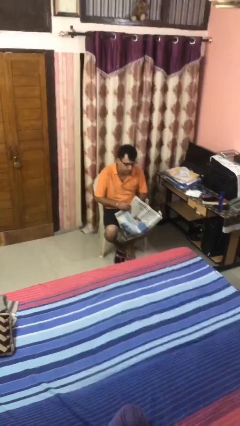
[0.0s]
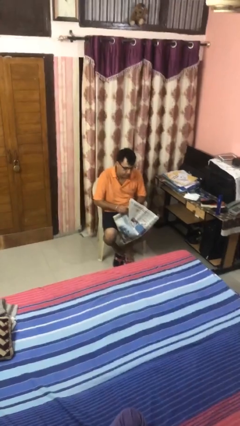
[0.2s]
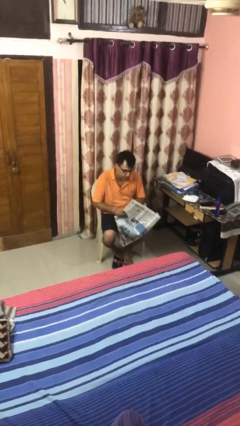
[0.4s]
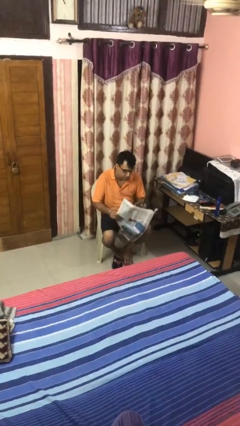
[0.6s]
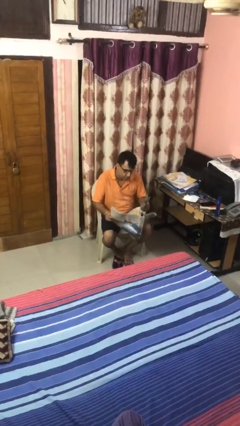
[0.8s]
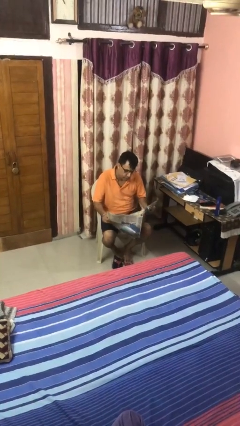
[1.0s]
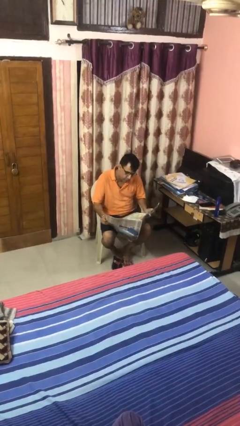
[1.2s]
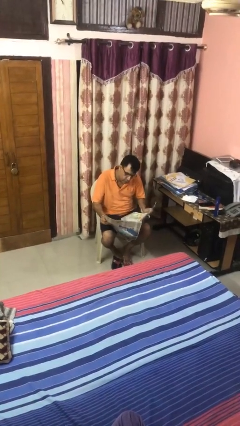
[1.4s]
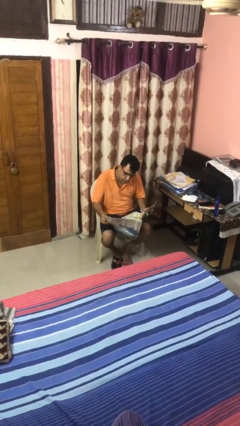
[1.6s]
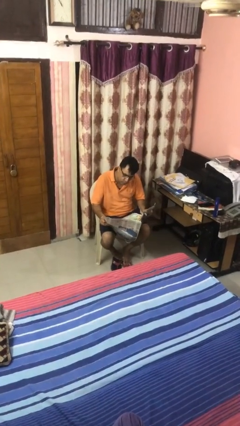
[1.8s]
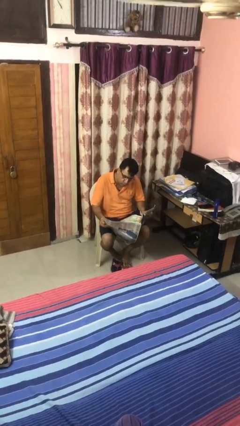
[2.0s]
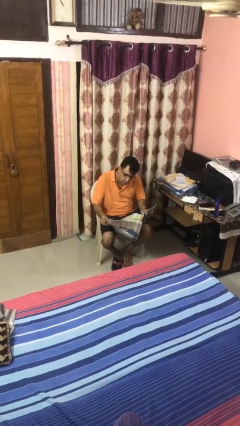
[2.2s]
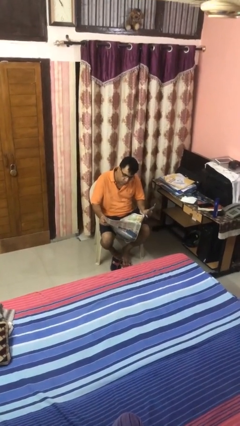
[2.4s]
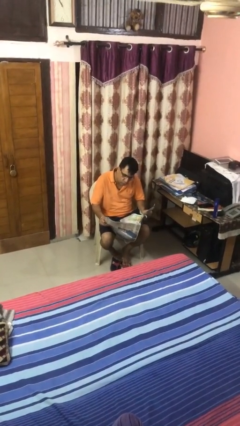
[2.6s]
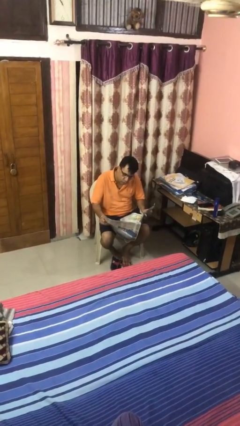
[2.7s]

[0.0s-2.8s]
person reads newspaper

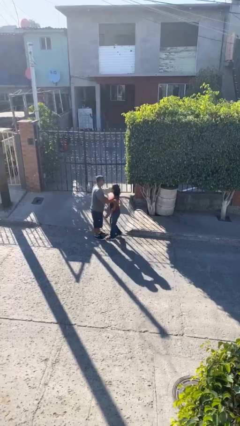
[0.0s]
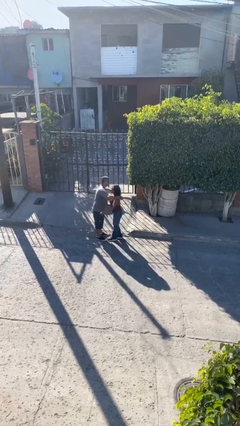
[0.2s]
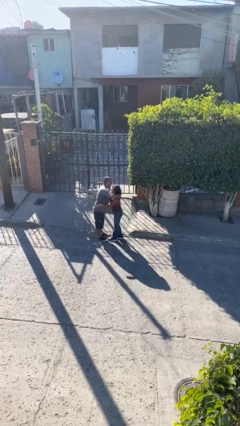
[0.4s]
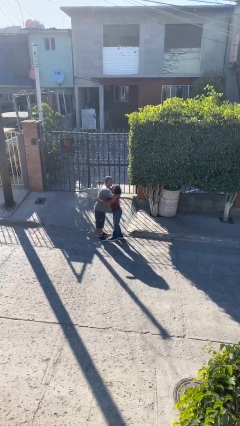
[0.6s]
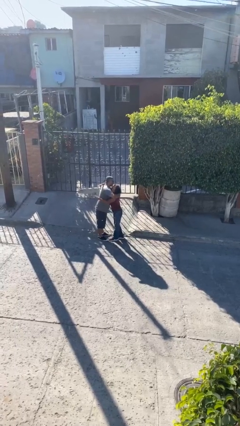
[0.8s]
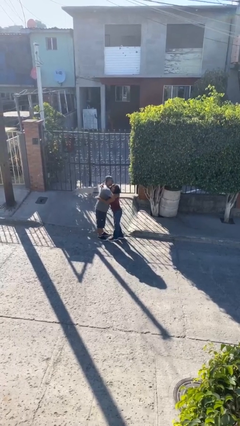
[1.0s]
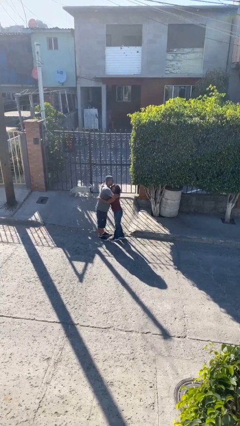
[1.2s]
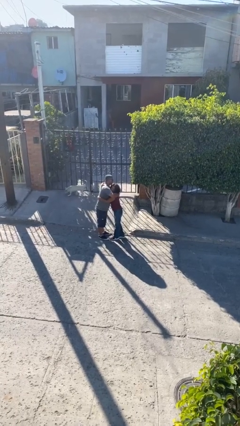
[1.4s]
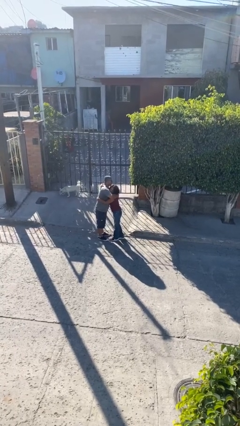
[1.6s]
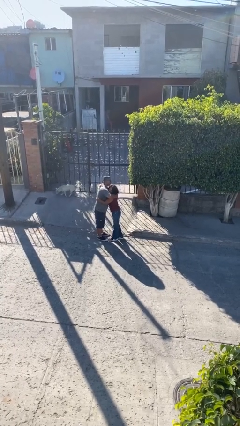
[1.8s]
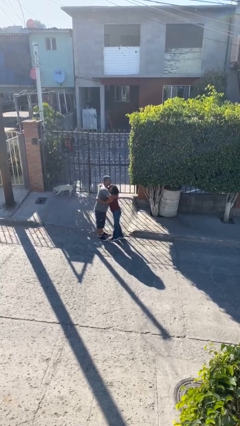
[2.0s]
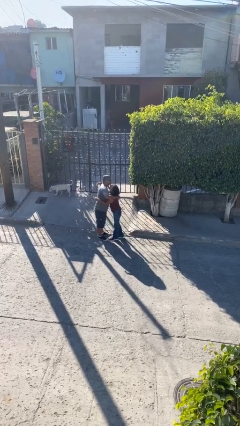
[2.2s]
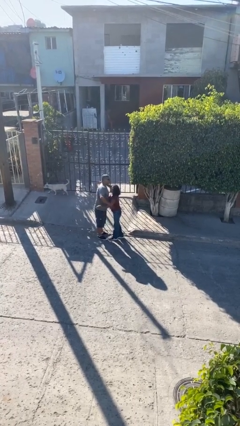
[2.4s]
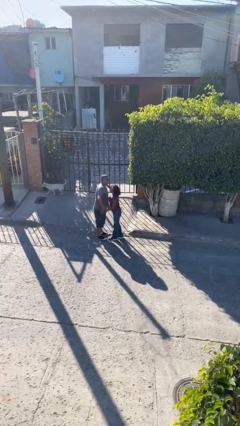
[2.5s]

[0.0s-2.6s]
person embraces person

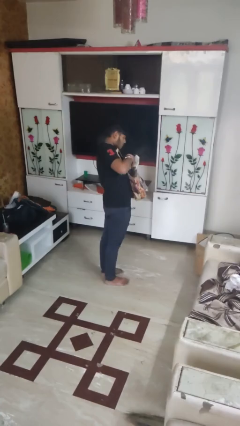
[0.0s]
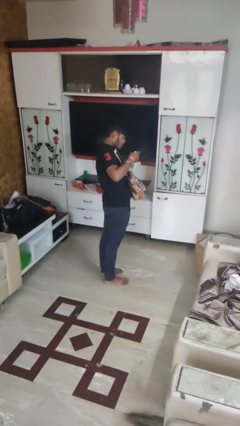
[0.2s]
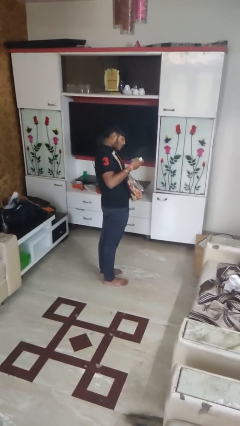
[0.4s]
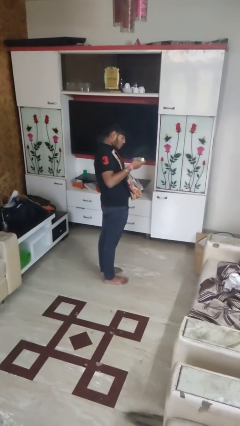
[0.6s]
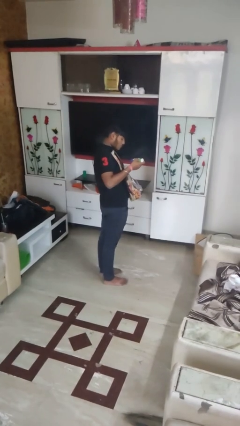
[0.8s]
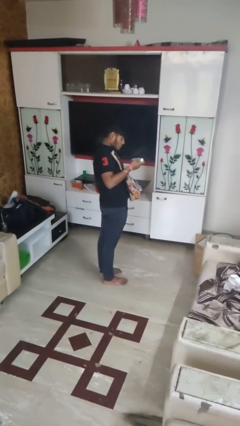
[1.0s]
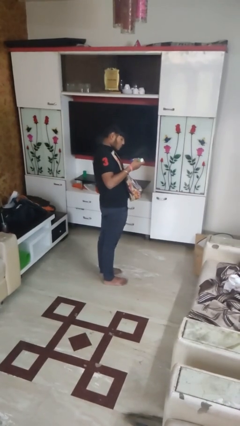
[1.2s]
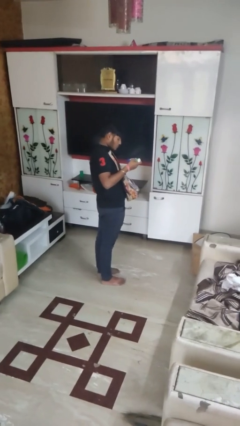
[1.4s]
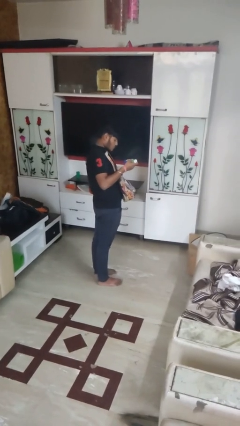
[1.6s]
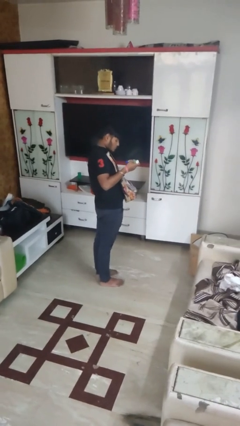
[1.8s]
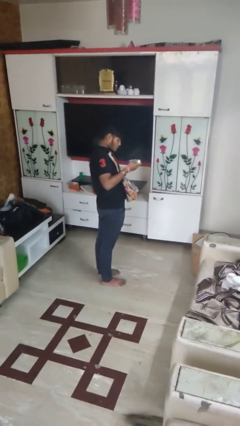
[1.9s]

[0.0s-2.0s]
person takes object from purse

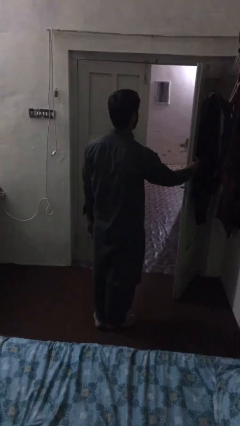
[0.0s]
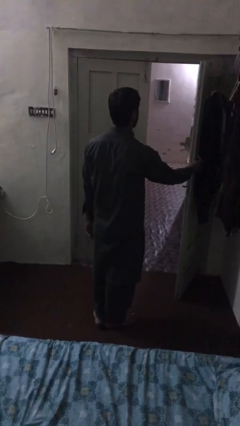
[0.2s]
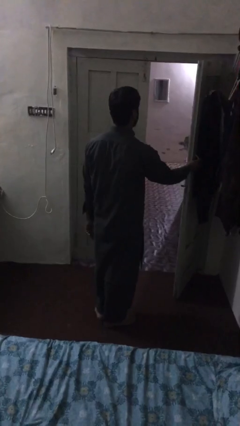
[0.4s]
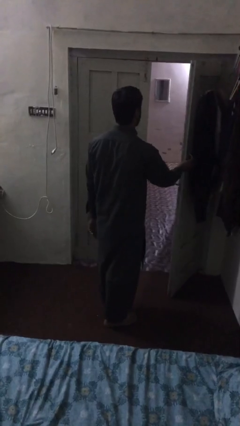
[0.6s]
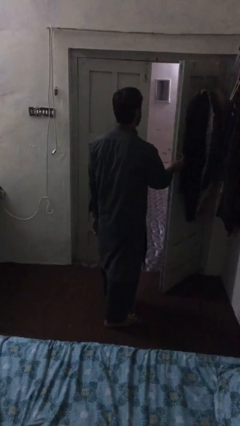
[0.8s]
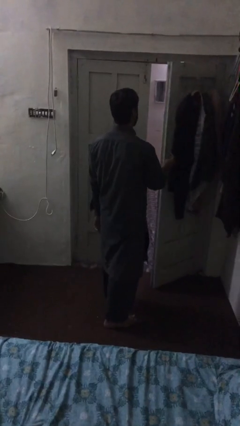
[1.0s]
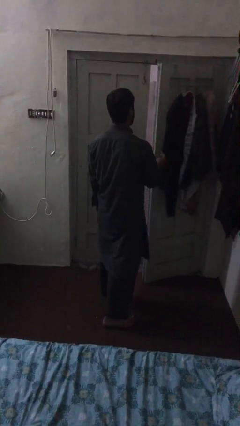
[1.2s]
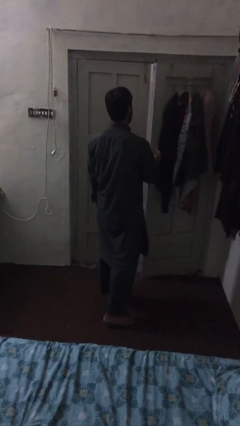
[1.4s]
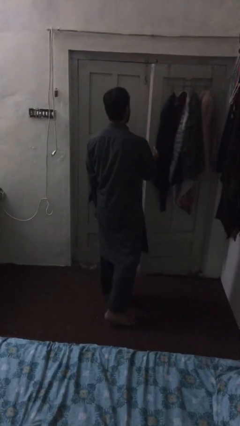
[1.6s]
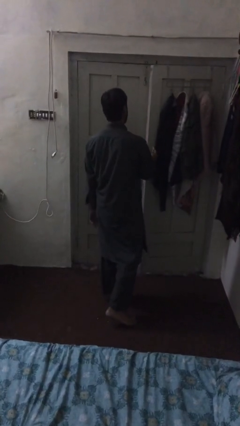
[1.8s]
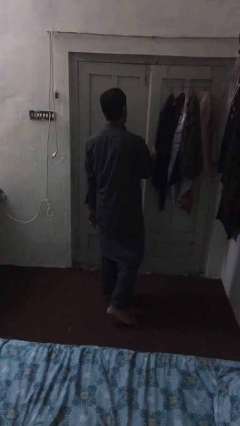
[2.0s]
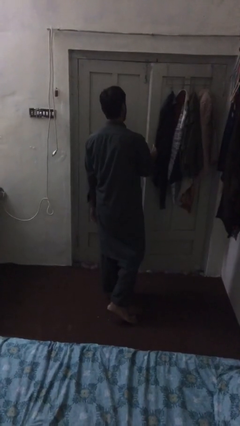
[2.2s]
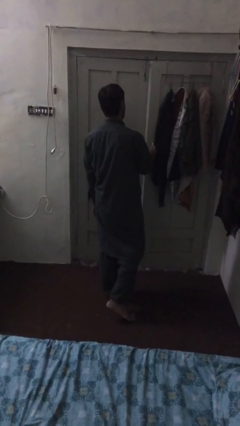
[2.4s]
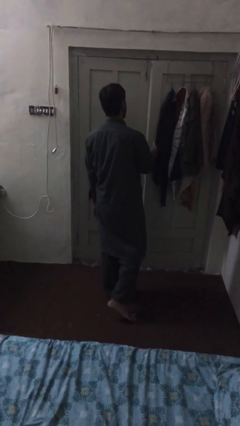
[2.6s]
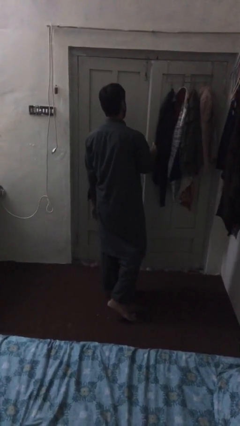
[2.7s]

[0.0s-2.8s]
person closes facility door

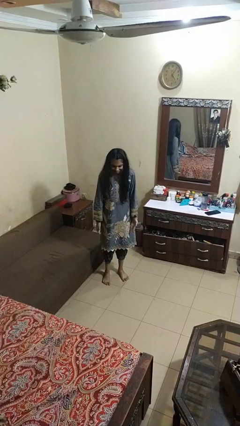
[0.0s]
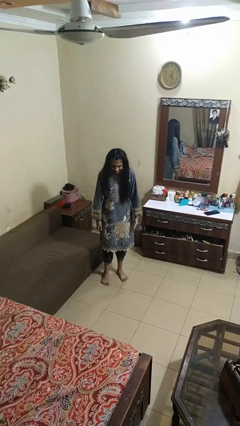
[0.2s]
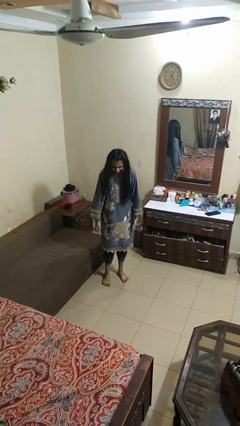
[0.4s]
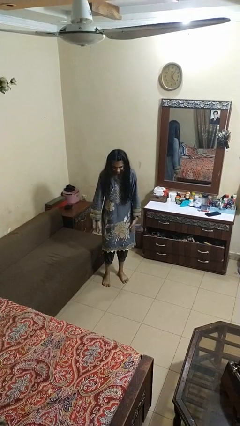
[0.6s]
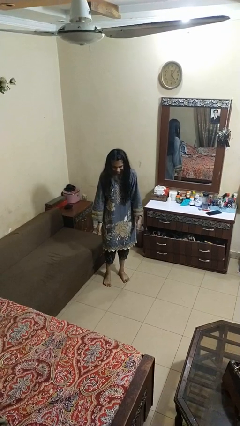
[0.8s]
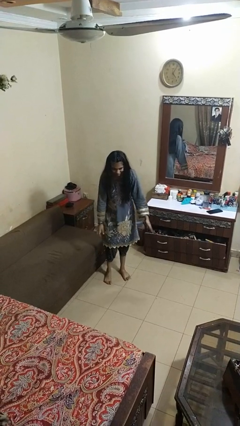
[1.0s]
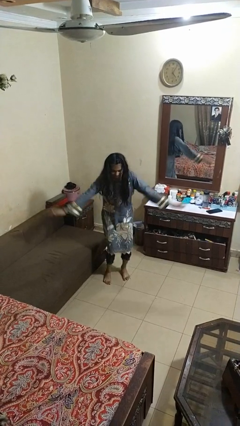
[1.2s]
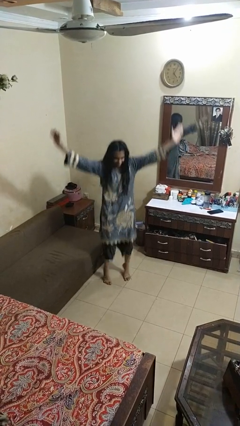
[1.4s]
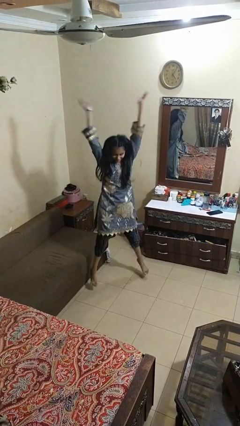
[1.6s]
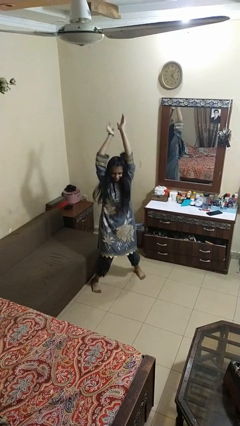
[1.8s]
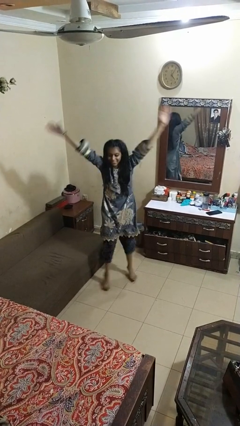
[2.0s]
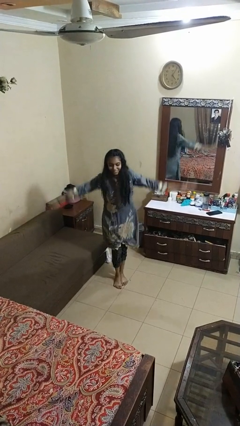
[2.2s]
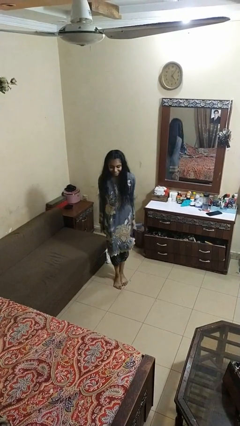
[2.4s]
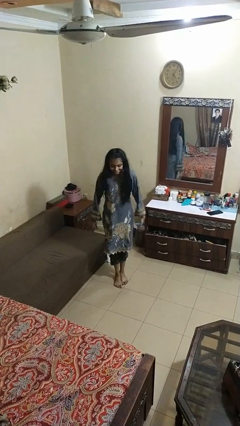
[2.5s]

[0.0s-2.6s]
person exercises with jumping jacks

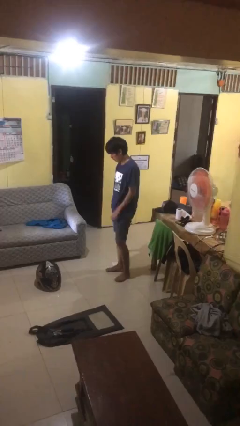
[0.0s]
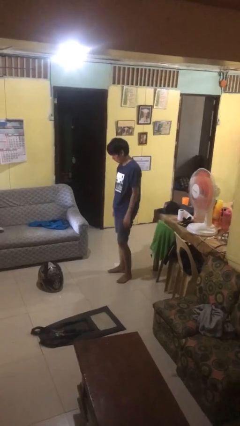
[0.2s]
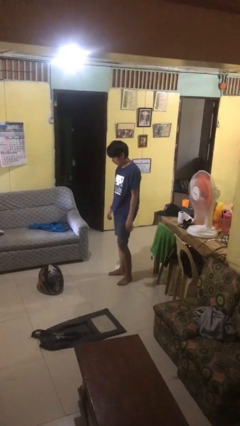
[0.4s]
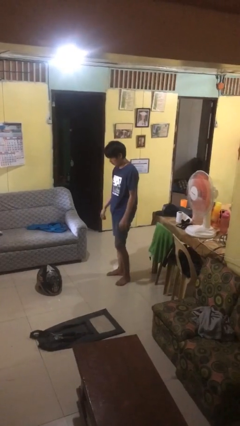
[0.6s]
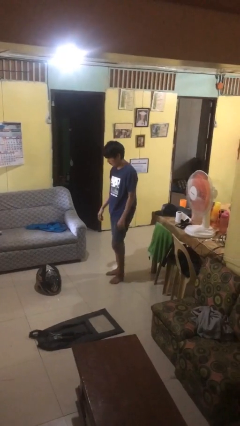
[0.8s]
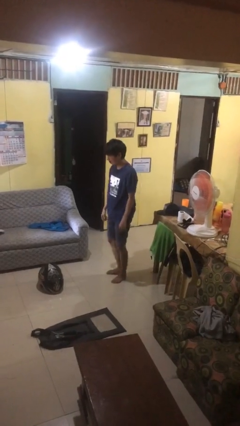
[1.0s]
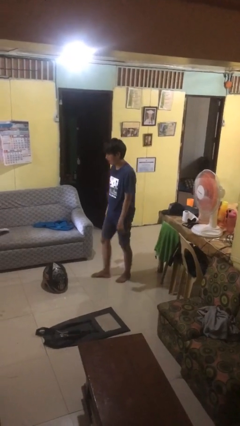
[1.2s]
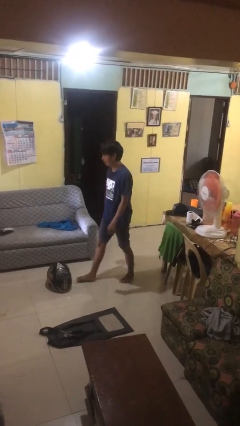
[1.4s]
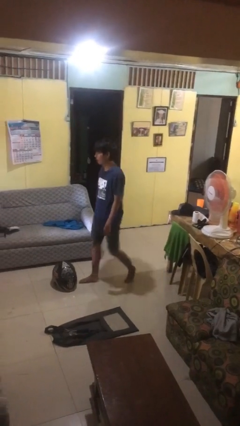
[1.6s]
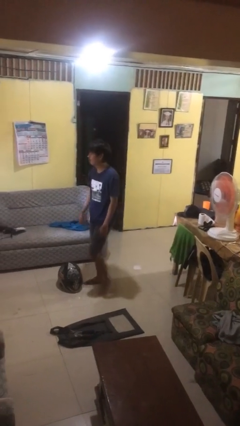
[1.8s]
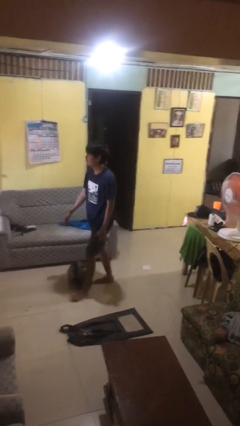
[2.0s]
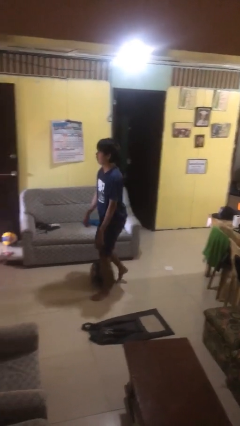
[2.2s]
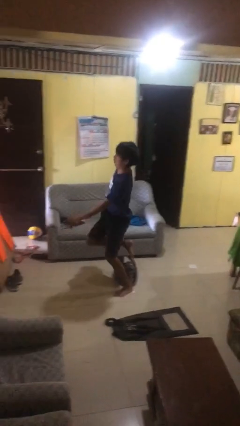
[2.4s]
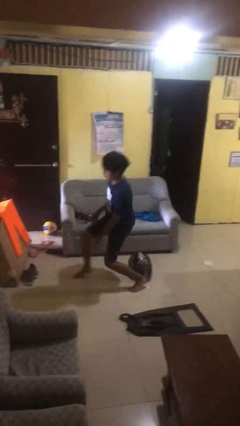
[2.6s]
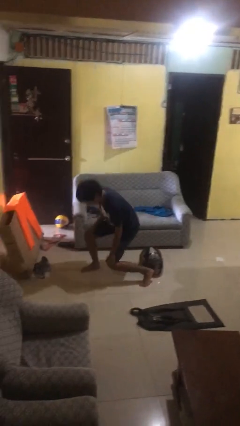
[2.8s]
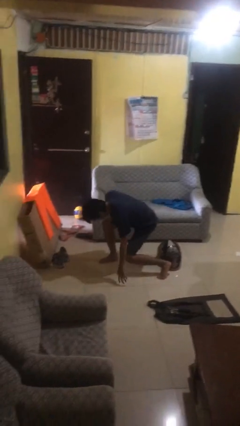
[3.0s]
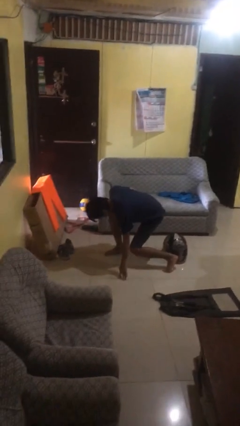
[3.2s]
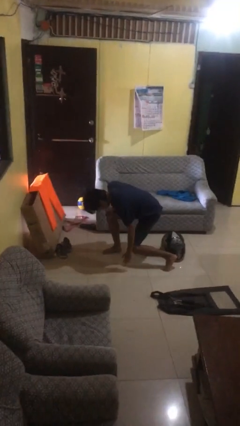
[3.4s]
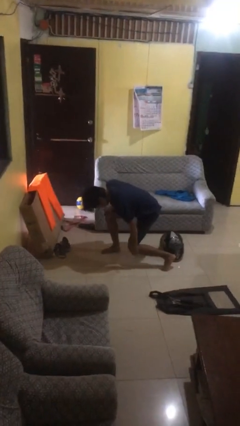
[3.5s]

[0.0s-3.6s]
person trips on object on floor

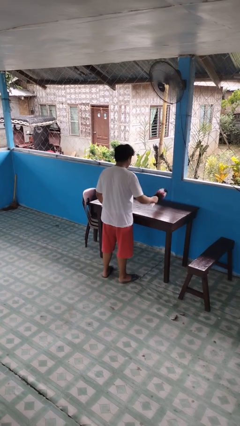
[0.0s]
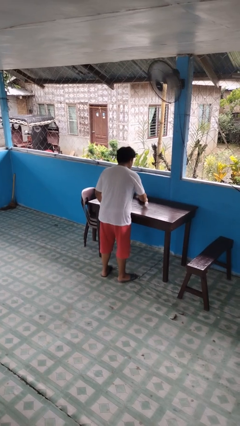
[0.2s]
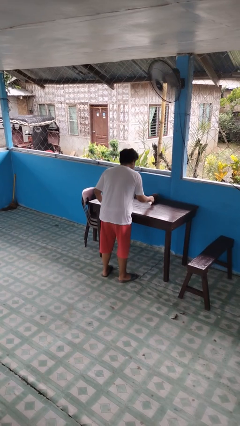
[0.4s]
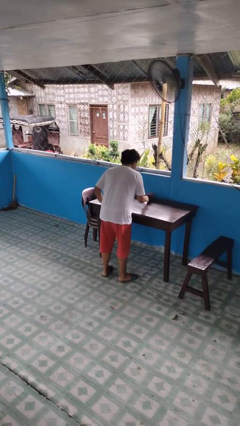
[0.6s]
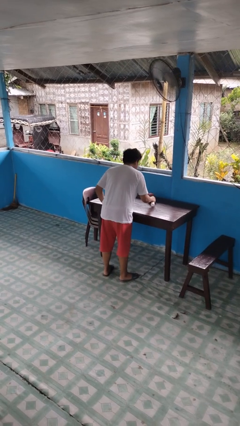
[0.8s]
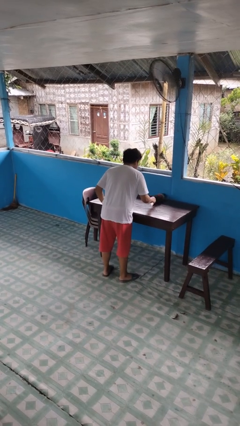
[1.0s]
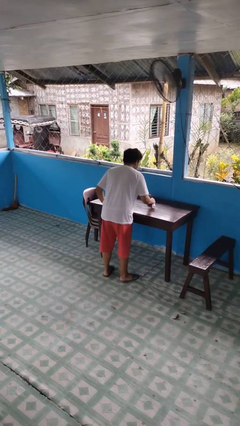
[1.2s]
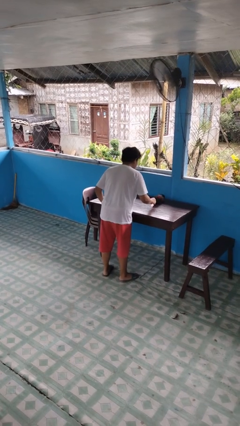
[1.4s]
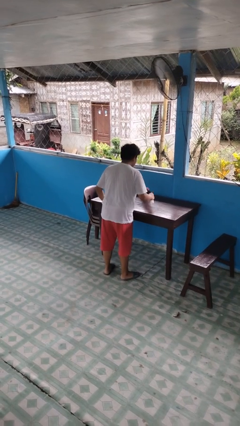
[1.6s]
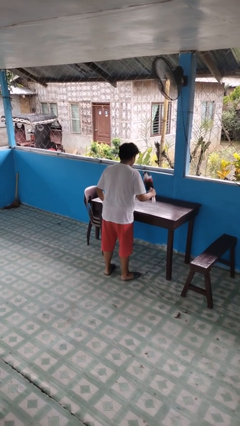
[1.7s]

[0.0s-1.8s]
person dusts furniture
